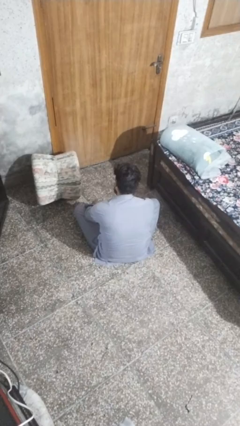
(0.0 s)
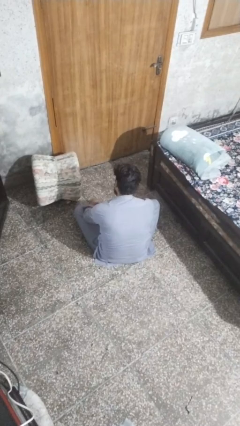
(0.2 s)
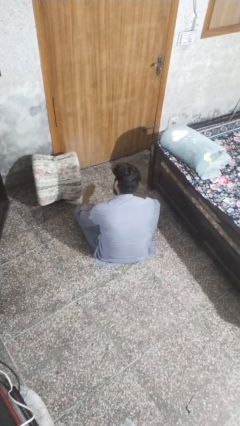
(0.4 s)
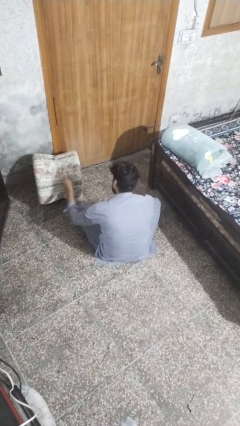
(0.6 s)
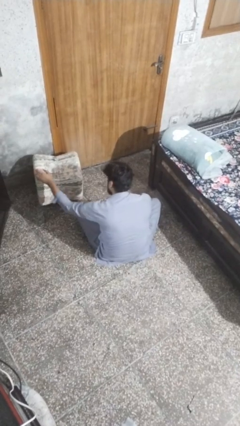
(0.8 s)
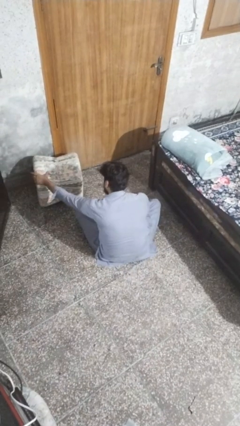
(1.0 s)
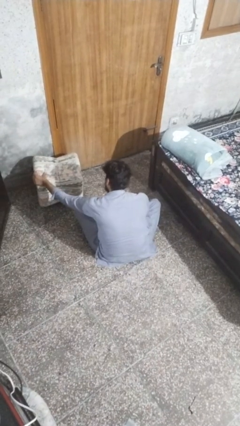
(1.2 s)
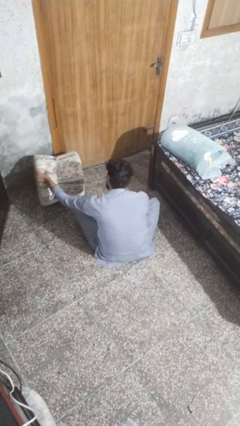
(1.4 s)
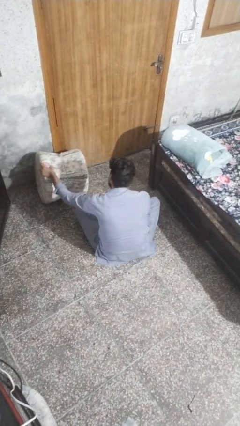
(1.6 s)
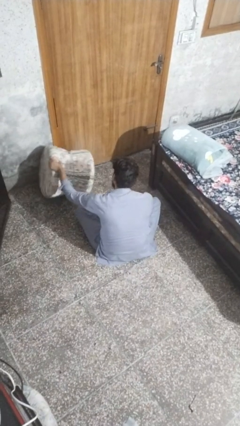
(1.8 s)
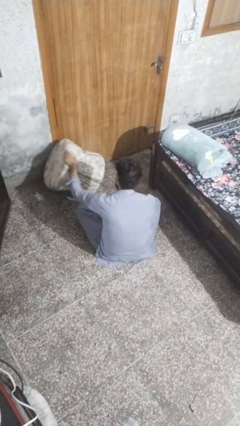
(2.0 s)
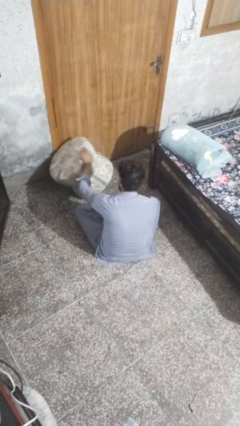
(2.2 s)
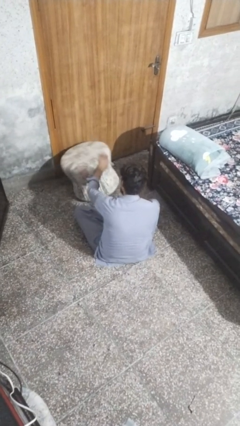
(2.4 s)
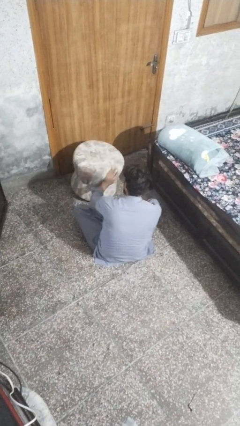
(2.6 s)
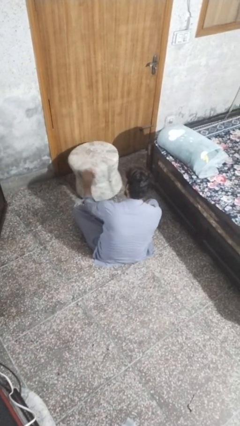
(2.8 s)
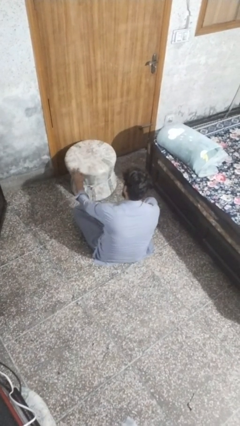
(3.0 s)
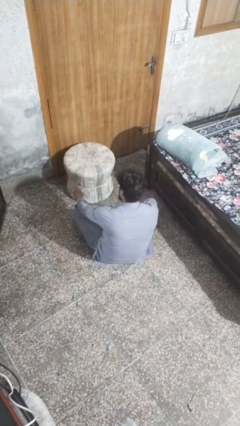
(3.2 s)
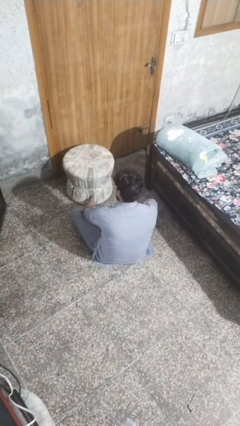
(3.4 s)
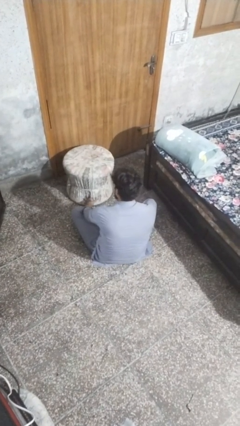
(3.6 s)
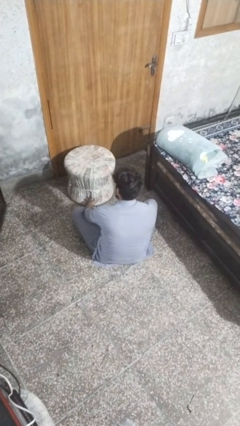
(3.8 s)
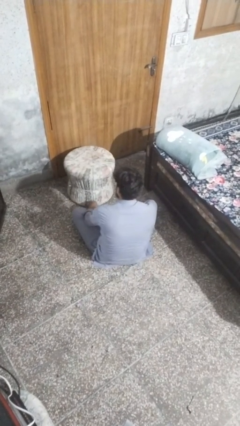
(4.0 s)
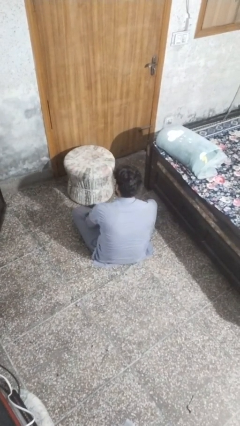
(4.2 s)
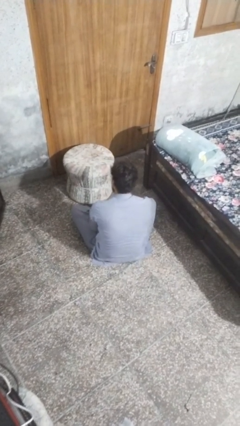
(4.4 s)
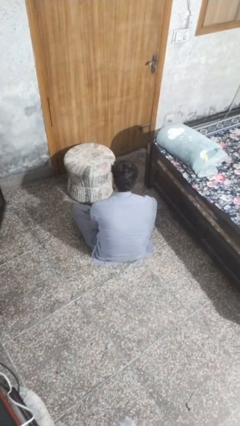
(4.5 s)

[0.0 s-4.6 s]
person sets upright furniture

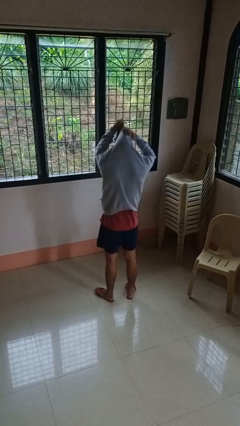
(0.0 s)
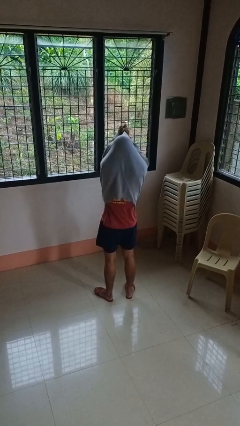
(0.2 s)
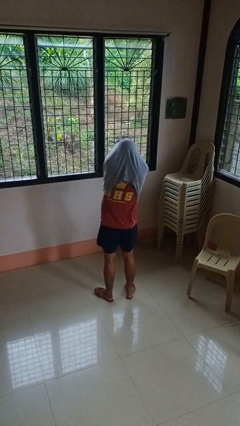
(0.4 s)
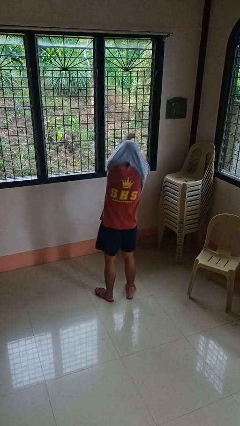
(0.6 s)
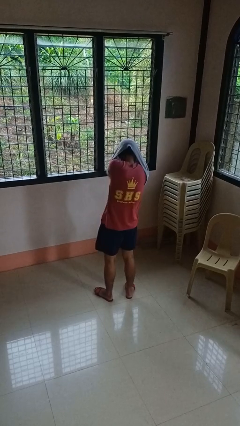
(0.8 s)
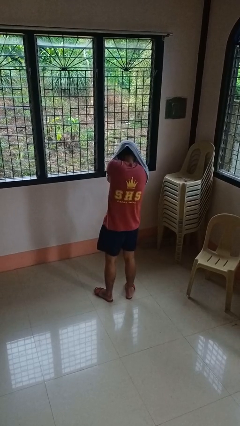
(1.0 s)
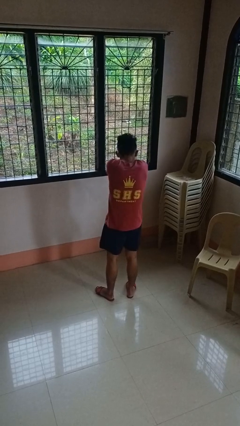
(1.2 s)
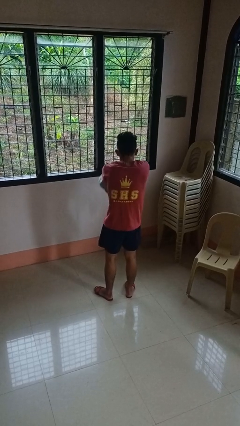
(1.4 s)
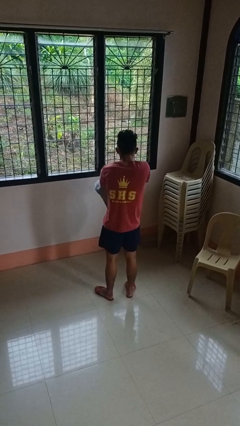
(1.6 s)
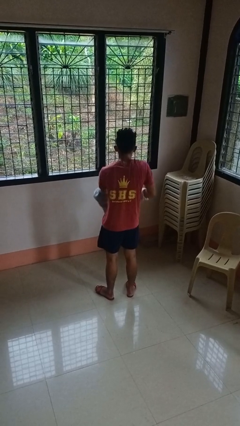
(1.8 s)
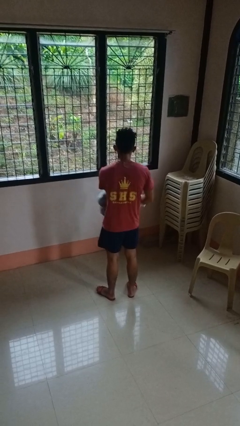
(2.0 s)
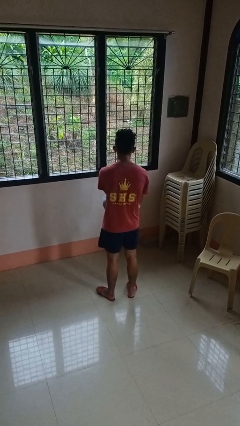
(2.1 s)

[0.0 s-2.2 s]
person takes off hoodie

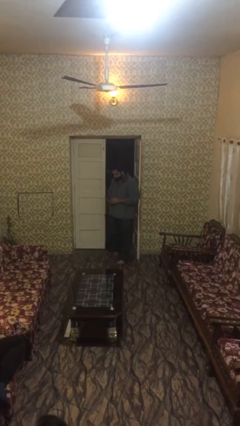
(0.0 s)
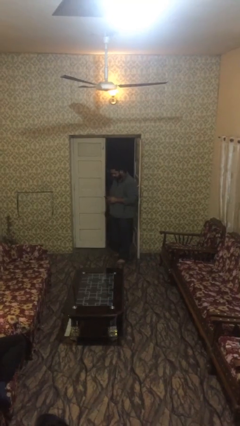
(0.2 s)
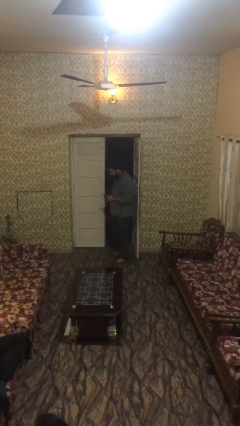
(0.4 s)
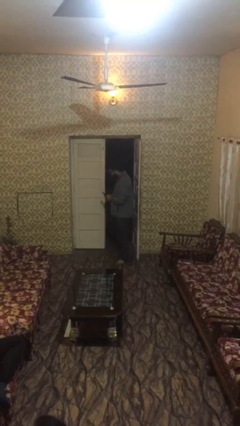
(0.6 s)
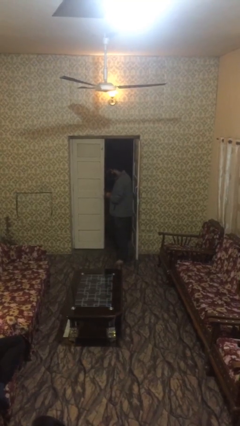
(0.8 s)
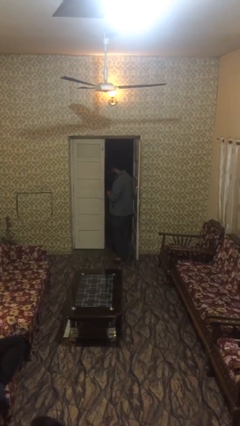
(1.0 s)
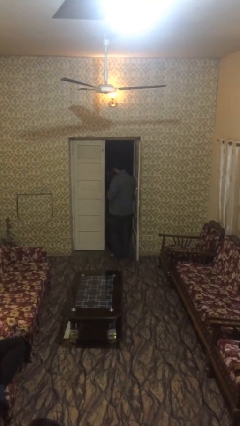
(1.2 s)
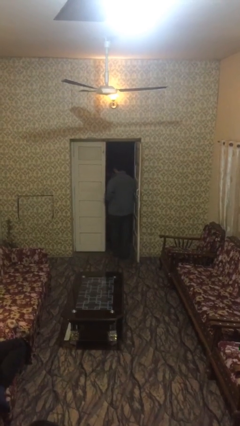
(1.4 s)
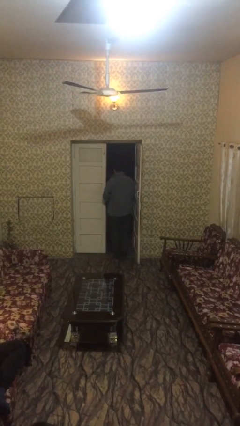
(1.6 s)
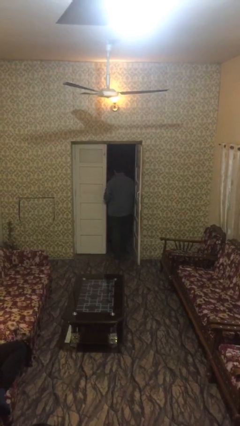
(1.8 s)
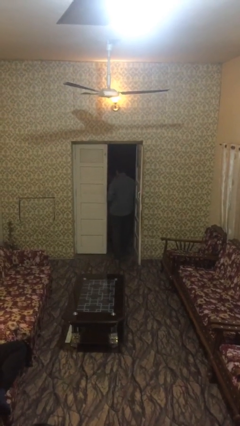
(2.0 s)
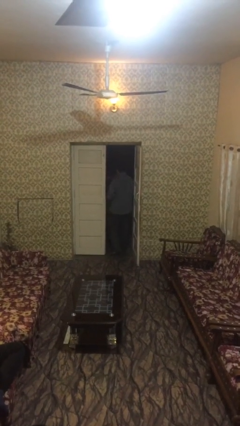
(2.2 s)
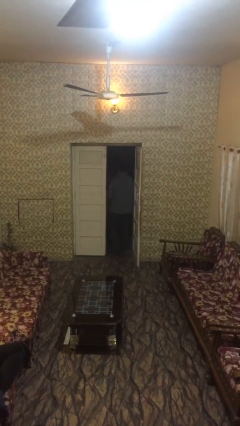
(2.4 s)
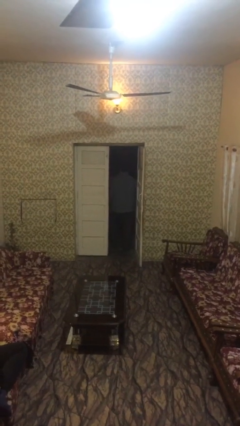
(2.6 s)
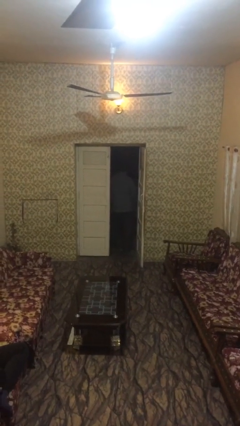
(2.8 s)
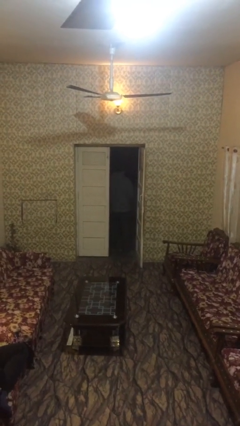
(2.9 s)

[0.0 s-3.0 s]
person exits scene through structure

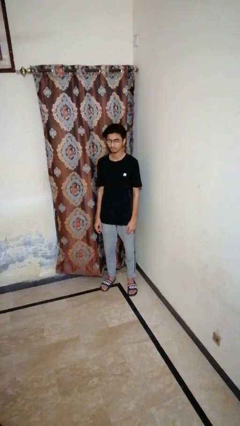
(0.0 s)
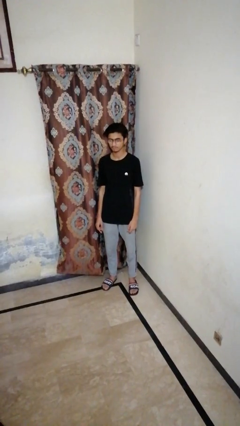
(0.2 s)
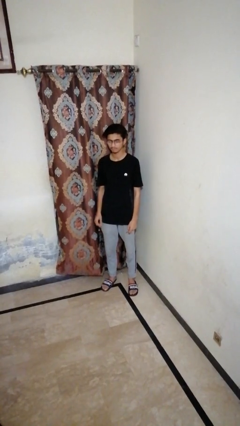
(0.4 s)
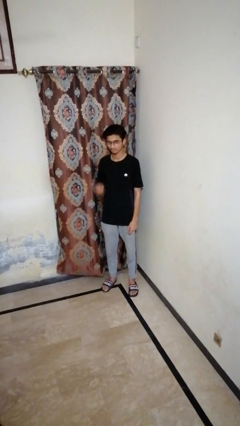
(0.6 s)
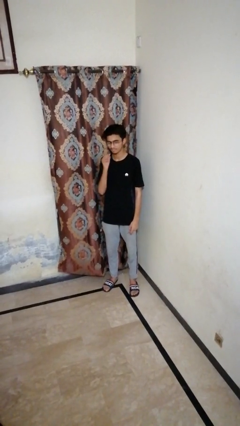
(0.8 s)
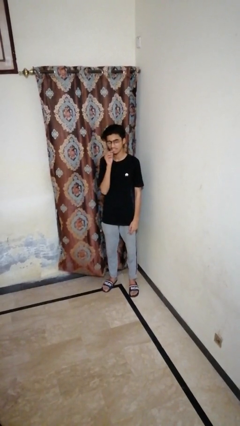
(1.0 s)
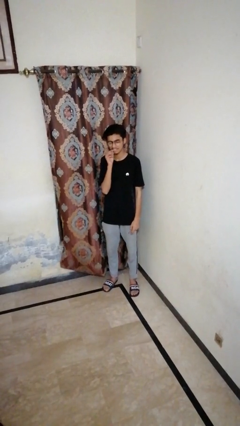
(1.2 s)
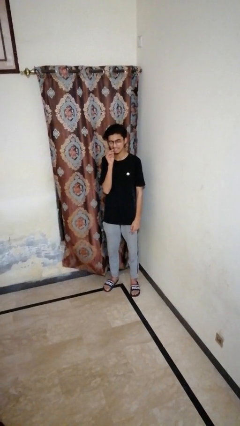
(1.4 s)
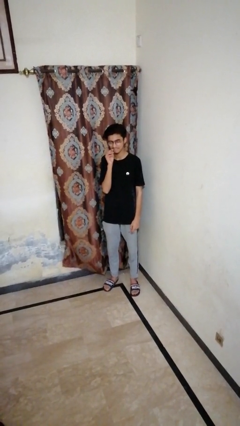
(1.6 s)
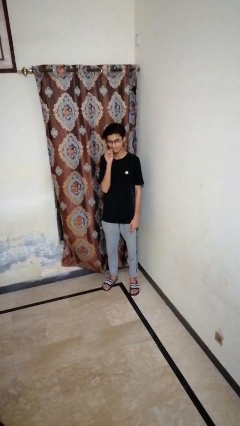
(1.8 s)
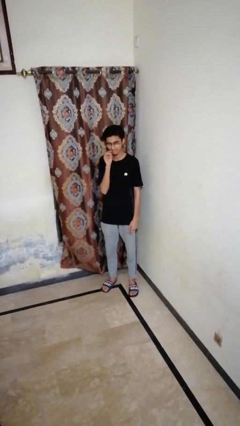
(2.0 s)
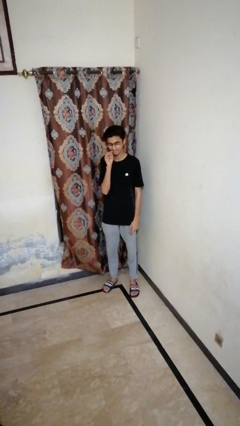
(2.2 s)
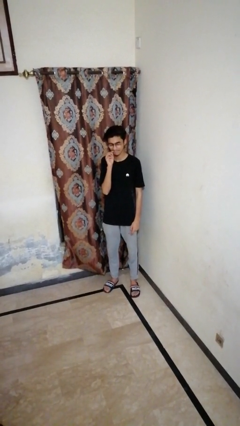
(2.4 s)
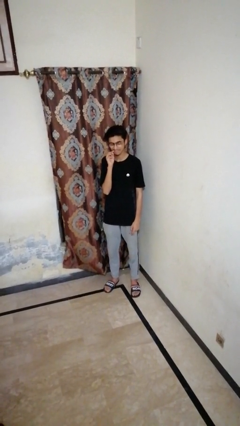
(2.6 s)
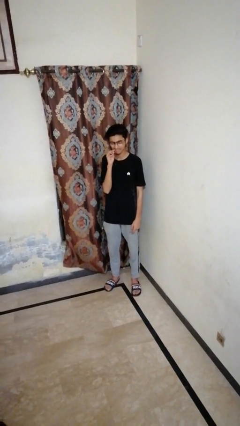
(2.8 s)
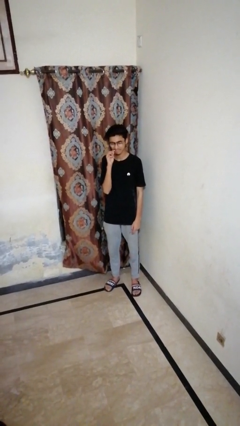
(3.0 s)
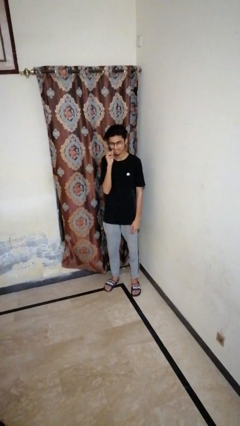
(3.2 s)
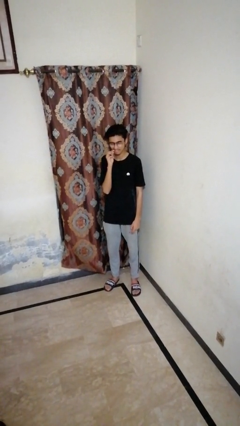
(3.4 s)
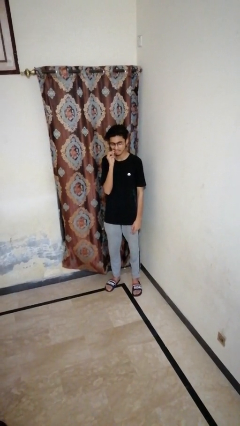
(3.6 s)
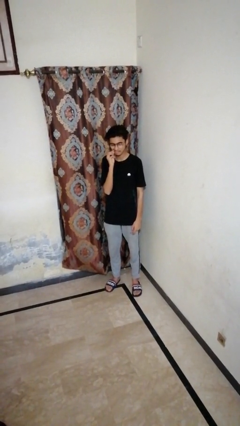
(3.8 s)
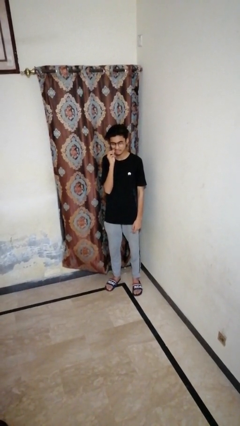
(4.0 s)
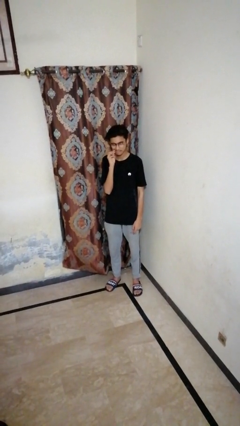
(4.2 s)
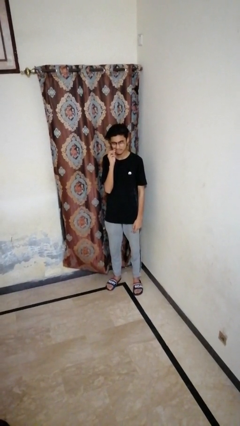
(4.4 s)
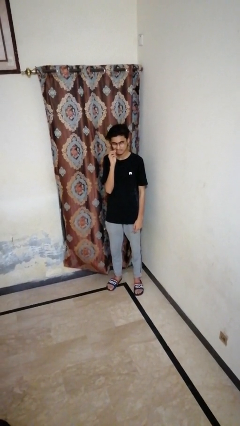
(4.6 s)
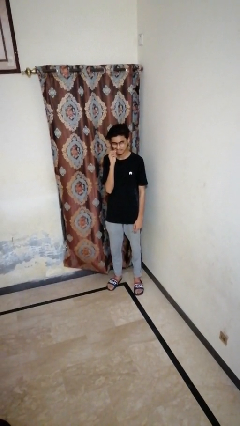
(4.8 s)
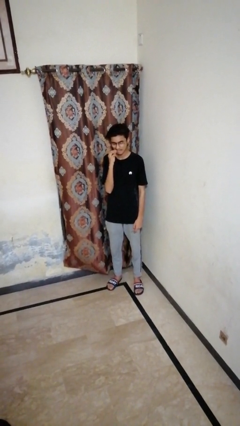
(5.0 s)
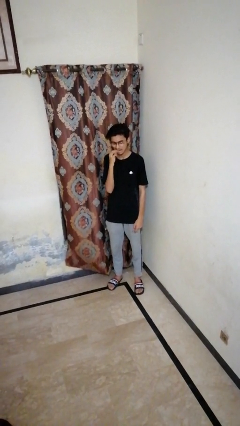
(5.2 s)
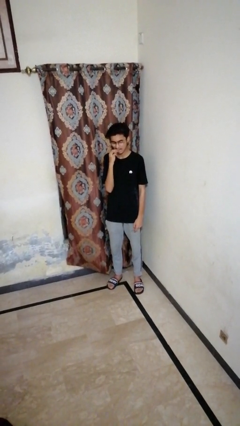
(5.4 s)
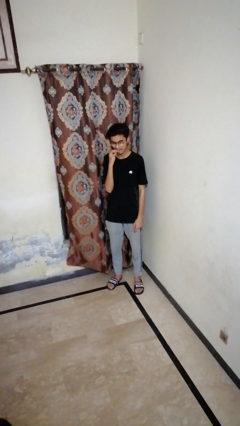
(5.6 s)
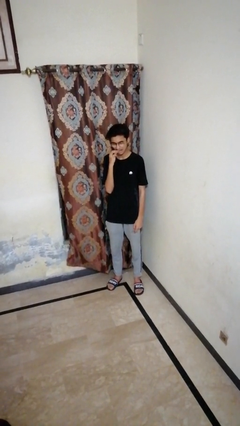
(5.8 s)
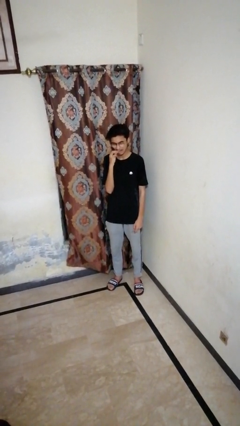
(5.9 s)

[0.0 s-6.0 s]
person flosses

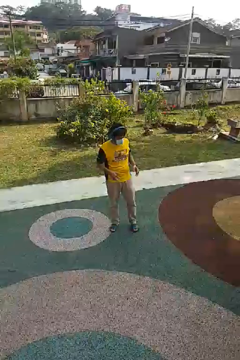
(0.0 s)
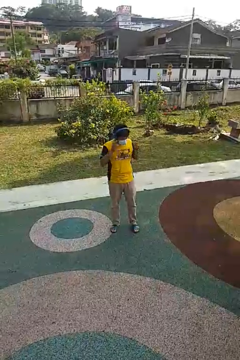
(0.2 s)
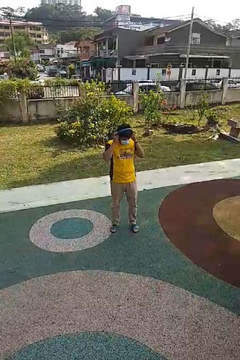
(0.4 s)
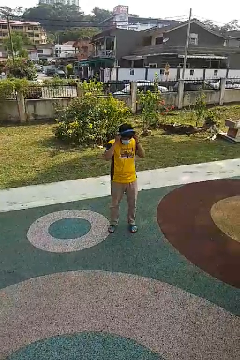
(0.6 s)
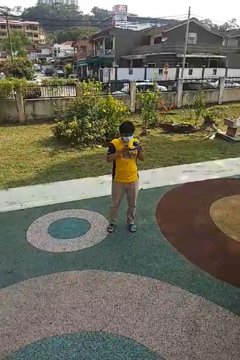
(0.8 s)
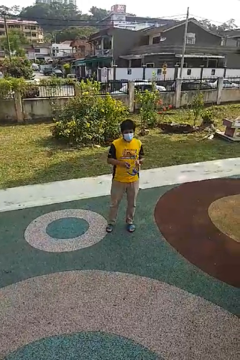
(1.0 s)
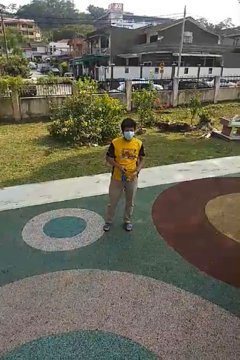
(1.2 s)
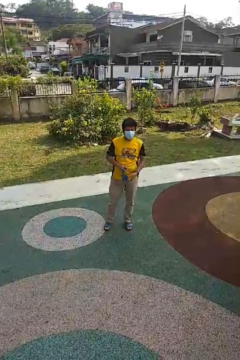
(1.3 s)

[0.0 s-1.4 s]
person takes off headphones

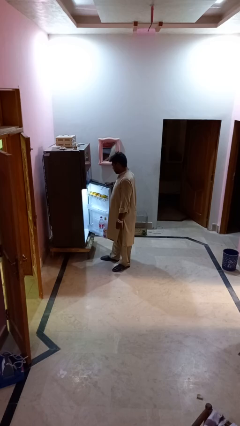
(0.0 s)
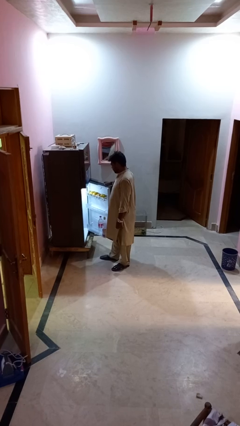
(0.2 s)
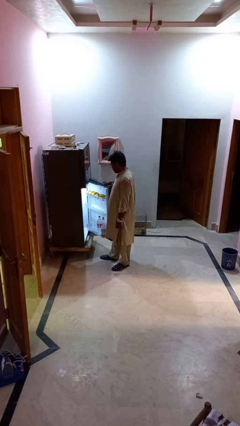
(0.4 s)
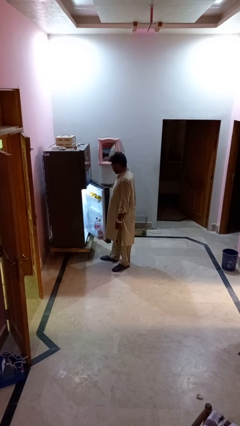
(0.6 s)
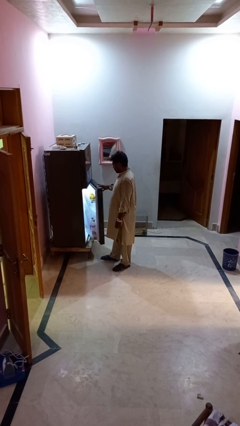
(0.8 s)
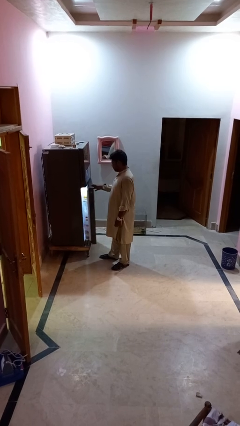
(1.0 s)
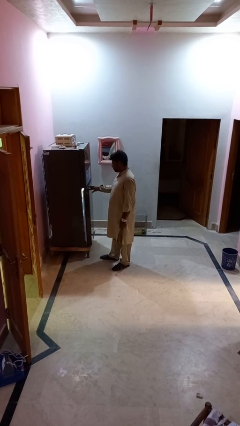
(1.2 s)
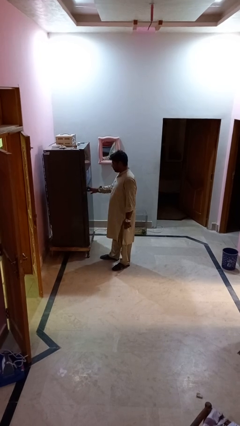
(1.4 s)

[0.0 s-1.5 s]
person closes refrigerator
